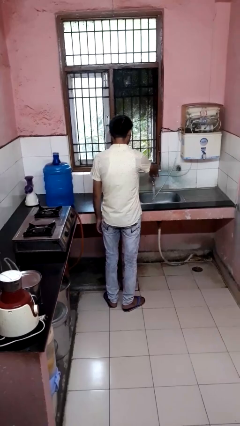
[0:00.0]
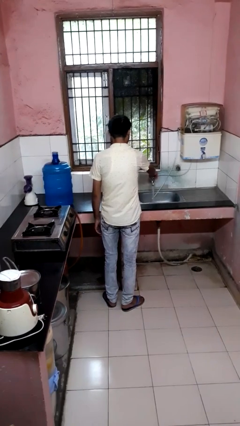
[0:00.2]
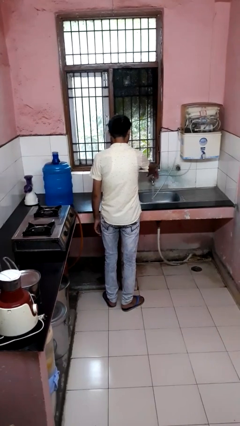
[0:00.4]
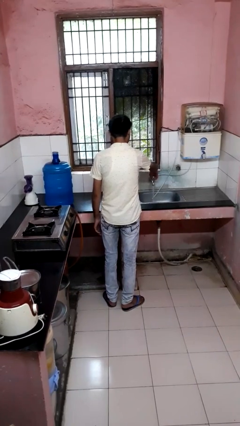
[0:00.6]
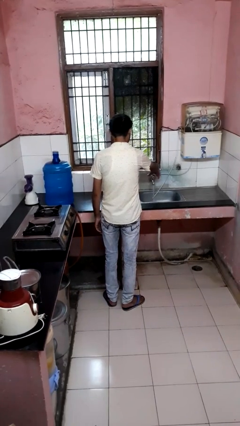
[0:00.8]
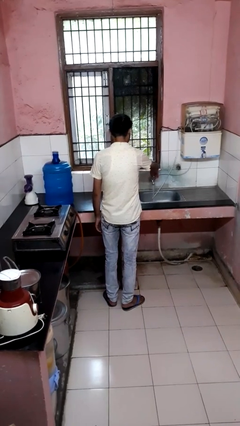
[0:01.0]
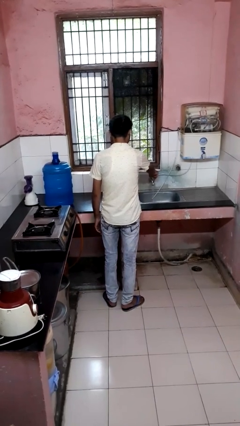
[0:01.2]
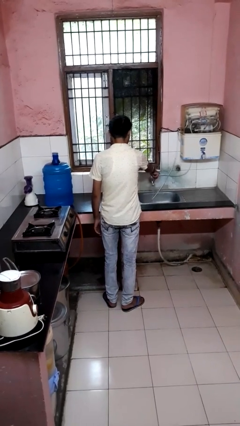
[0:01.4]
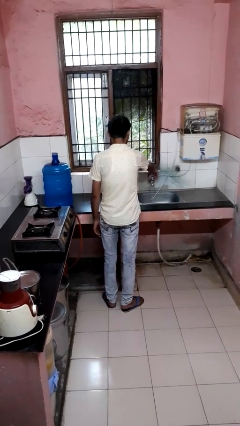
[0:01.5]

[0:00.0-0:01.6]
person turns off faucet

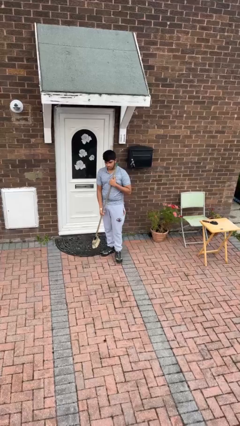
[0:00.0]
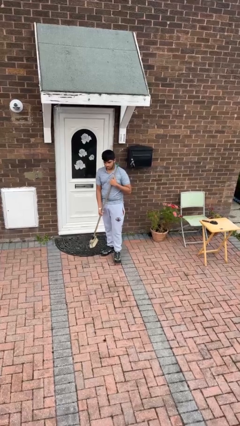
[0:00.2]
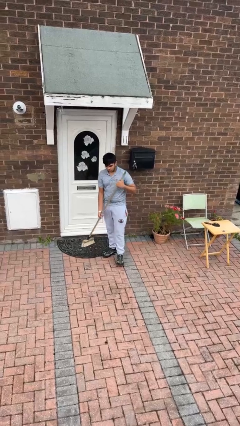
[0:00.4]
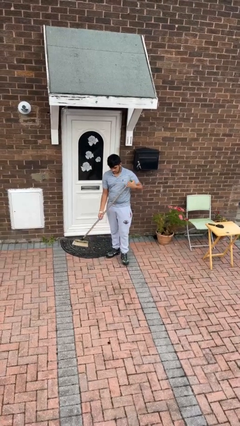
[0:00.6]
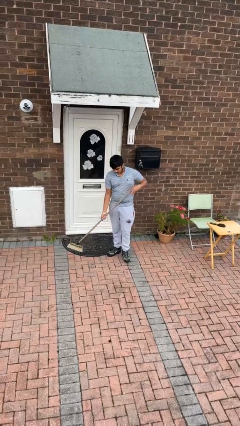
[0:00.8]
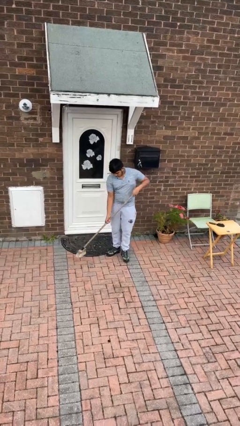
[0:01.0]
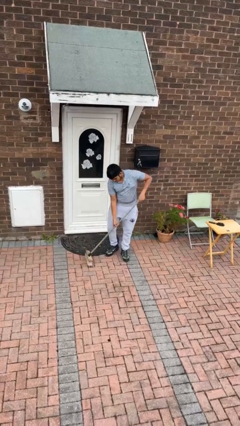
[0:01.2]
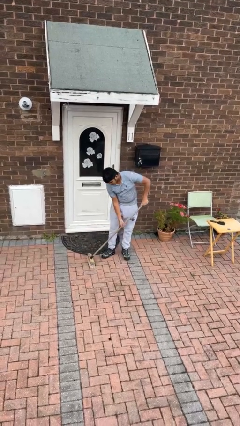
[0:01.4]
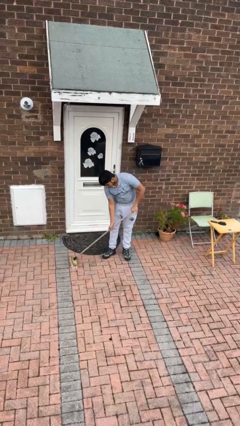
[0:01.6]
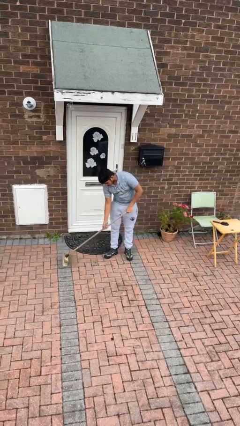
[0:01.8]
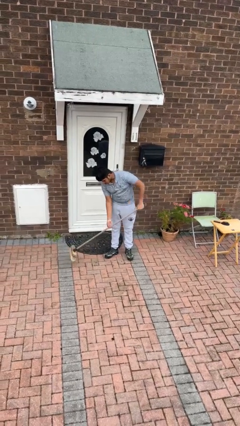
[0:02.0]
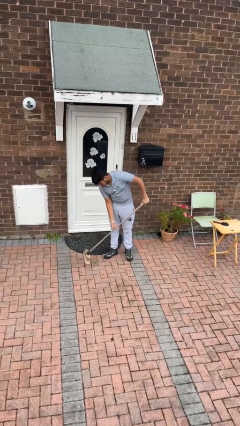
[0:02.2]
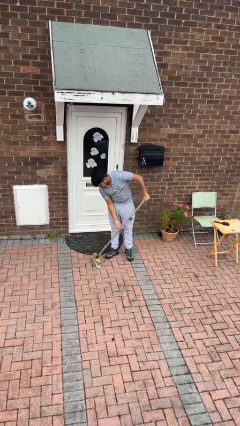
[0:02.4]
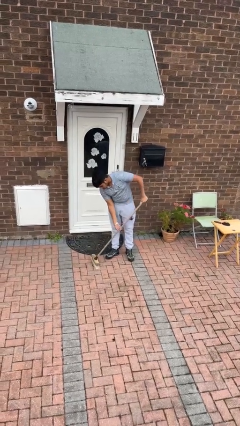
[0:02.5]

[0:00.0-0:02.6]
person sweeps floor

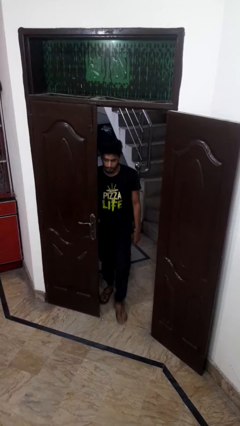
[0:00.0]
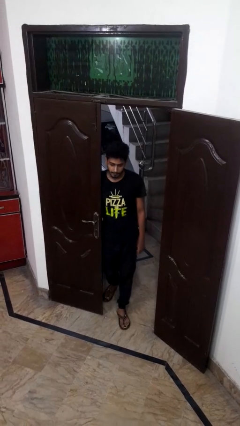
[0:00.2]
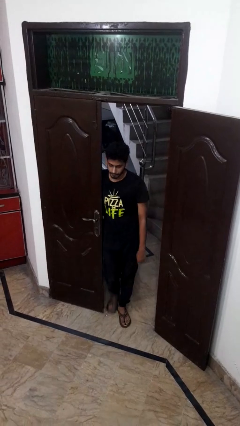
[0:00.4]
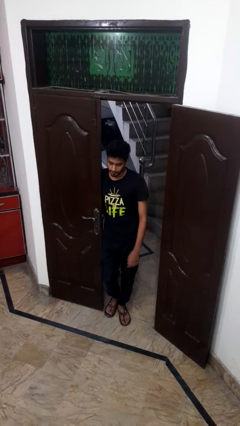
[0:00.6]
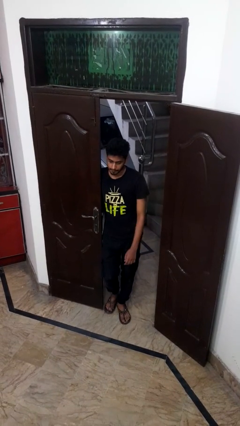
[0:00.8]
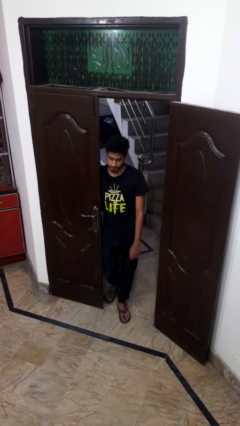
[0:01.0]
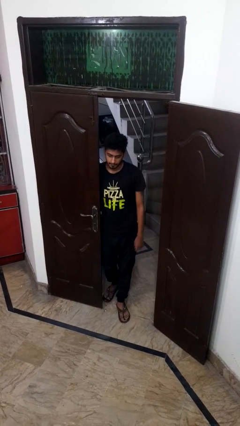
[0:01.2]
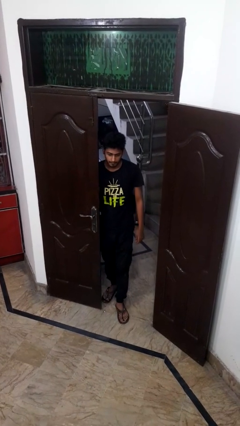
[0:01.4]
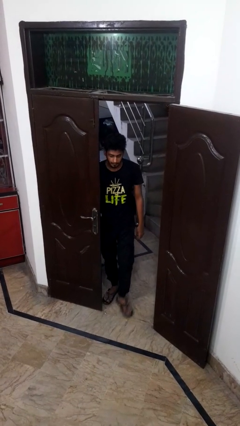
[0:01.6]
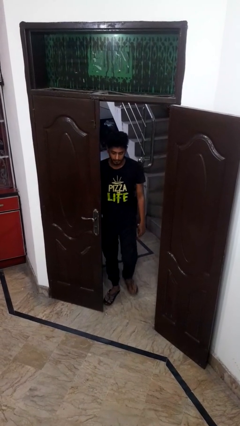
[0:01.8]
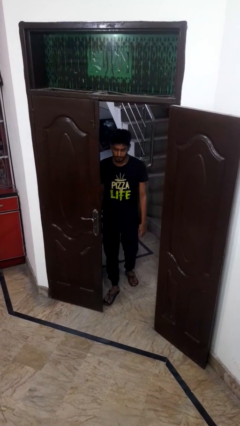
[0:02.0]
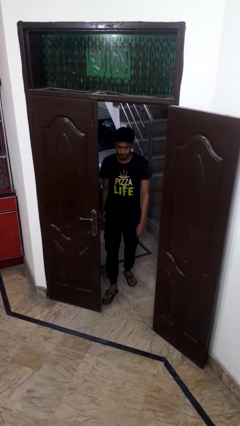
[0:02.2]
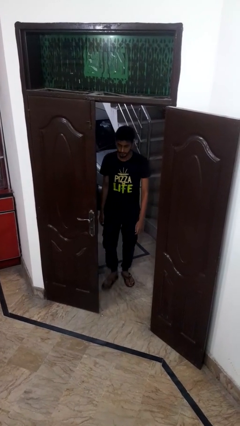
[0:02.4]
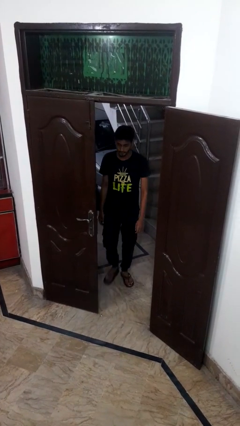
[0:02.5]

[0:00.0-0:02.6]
person bumps into wall

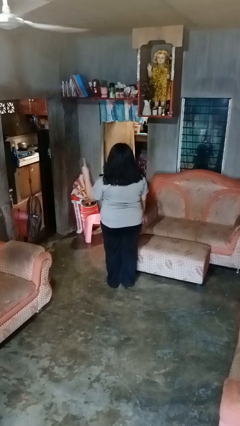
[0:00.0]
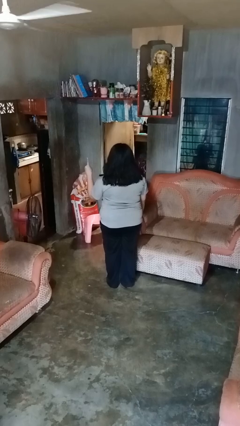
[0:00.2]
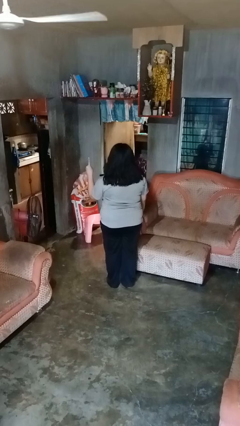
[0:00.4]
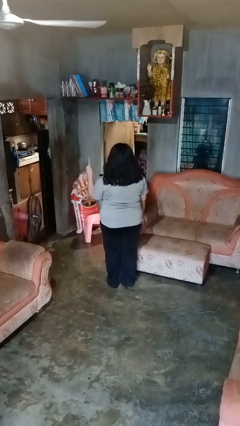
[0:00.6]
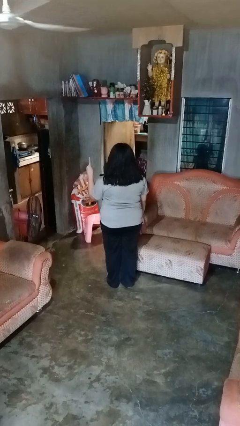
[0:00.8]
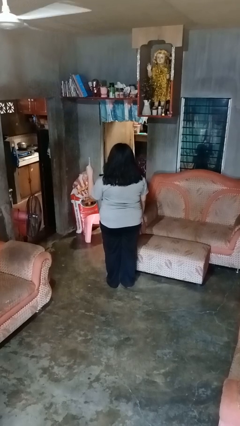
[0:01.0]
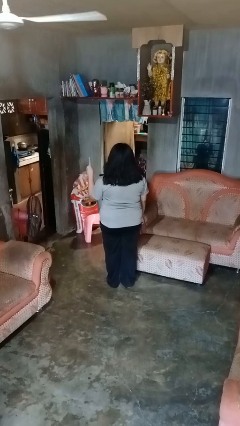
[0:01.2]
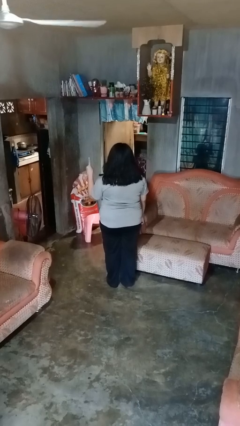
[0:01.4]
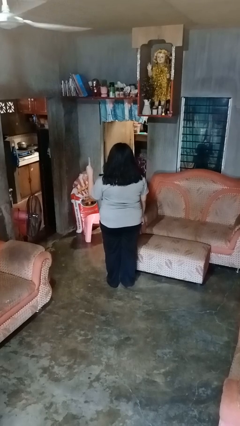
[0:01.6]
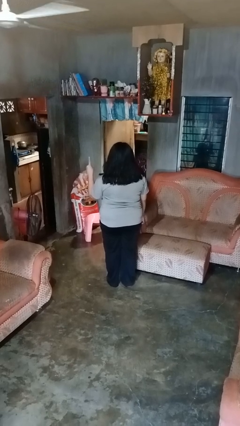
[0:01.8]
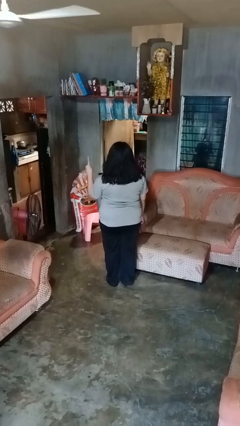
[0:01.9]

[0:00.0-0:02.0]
person gestures number one

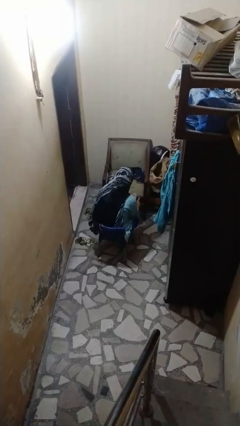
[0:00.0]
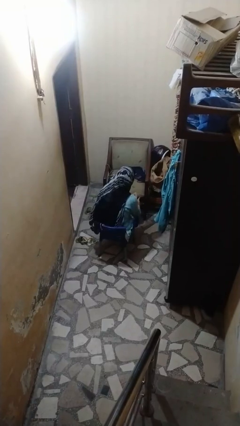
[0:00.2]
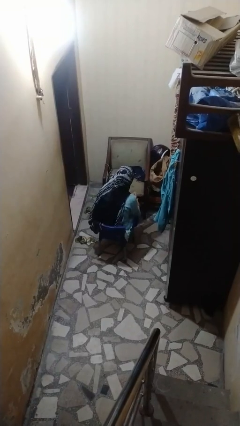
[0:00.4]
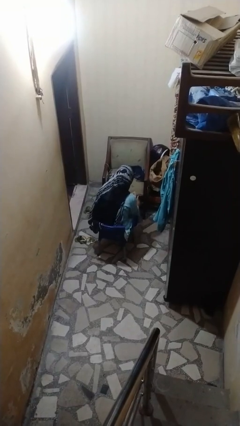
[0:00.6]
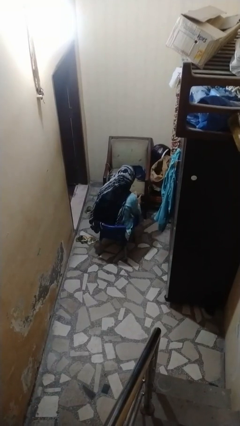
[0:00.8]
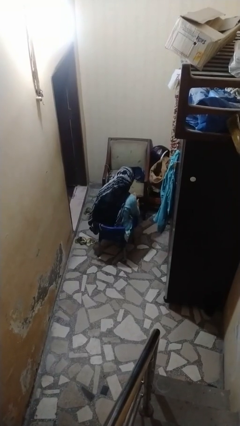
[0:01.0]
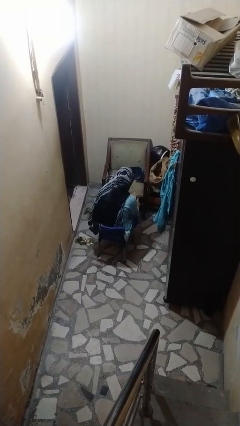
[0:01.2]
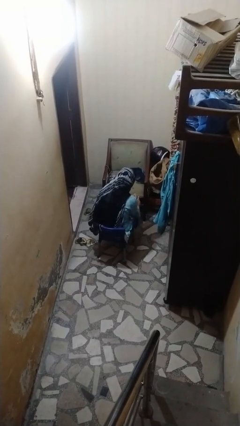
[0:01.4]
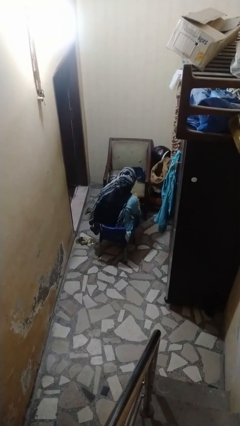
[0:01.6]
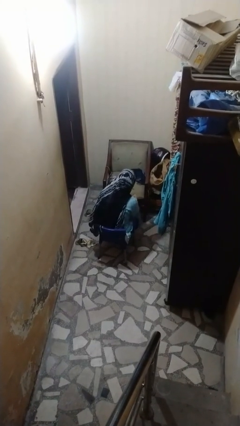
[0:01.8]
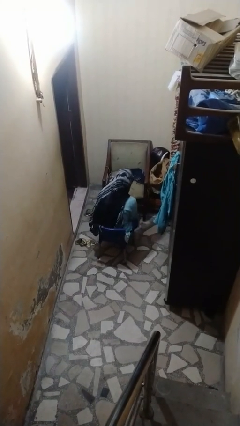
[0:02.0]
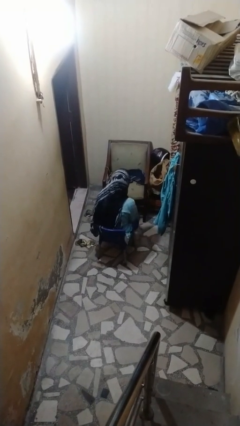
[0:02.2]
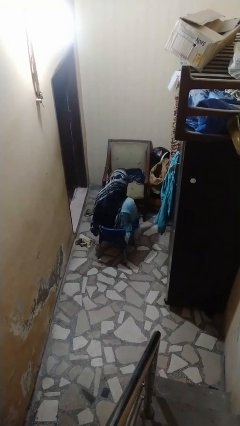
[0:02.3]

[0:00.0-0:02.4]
person rubs foot

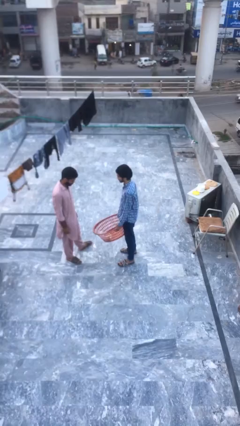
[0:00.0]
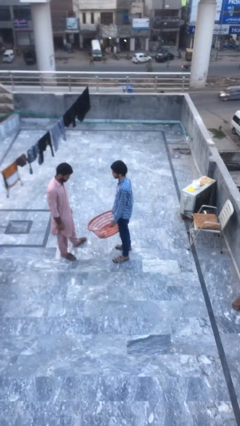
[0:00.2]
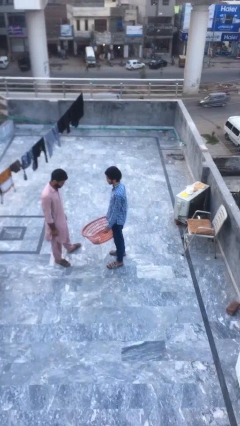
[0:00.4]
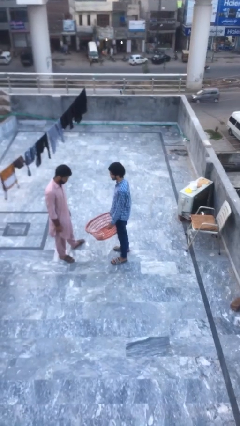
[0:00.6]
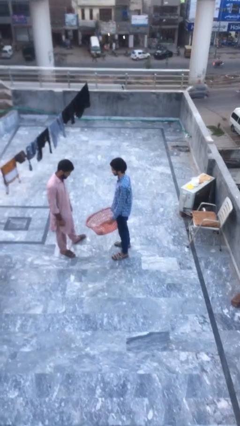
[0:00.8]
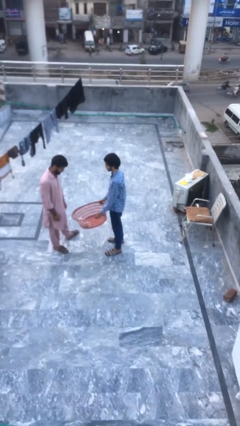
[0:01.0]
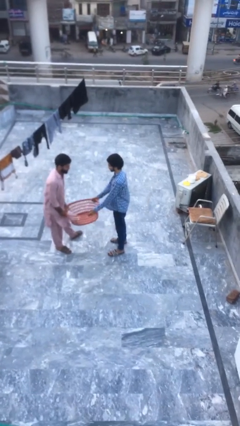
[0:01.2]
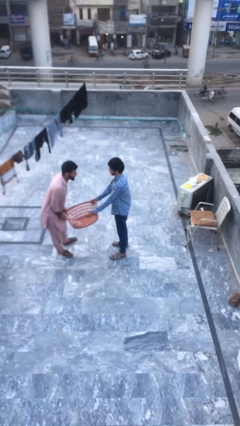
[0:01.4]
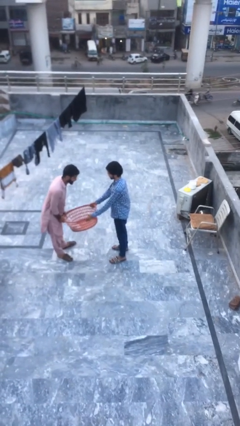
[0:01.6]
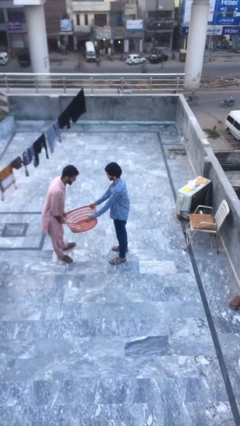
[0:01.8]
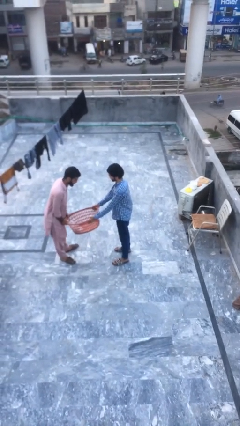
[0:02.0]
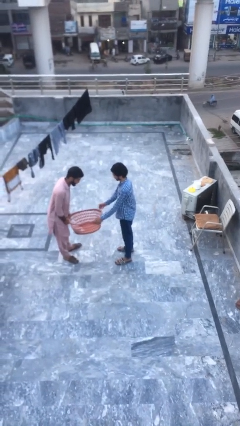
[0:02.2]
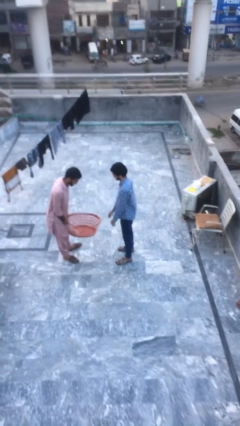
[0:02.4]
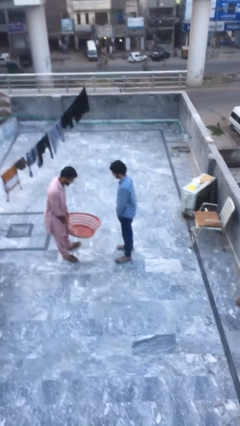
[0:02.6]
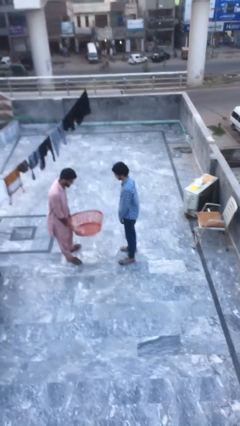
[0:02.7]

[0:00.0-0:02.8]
person transfers object to person

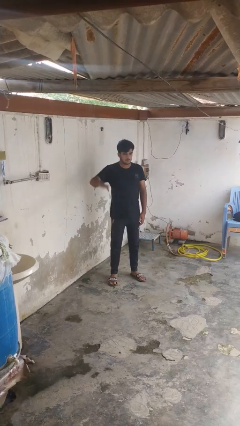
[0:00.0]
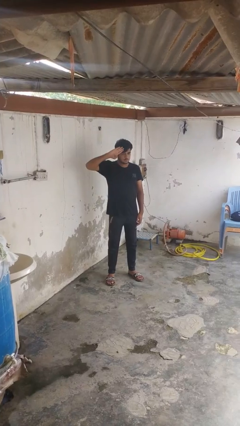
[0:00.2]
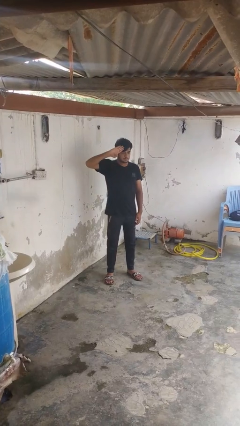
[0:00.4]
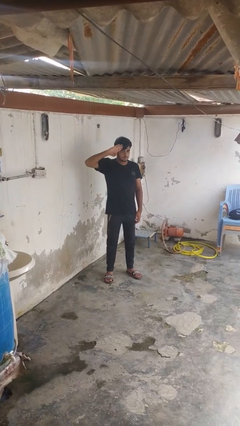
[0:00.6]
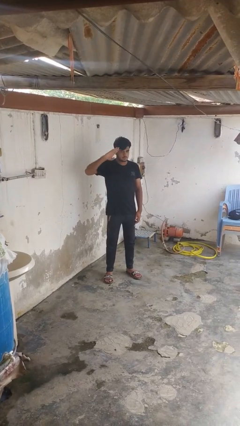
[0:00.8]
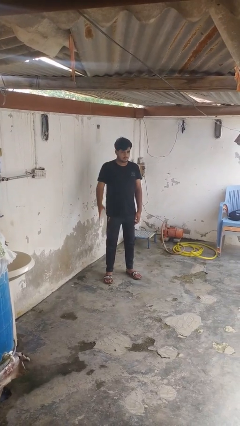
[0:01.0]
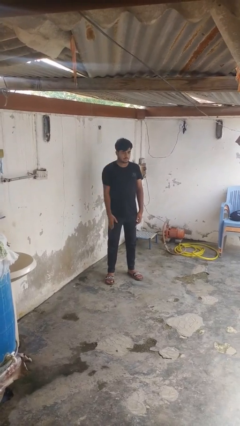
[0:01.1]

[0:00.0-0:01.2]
person salutes

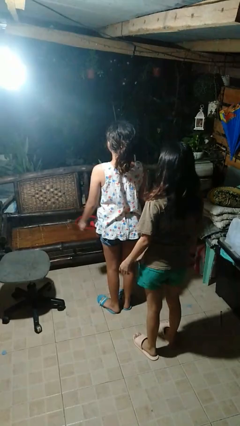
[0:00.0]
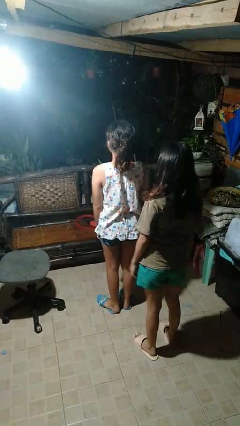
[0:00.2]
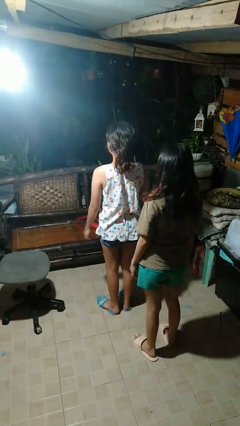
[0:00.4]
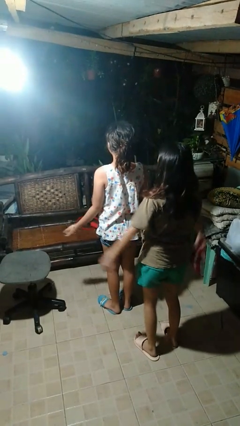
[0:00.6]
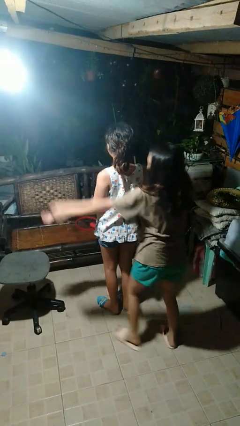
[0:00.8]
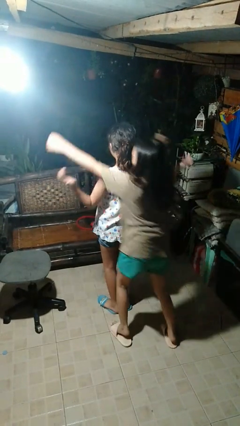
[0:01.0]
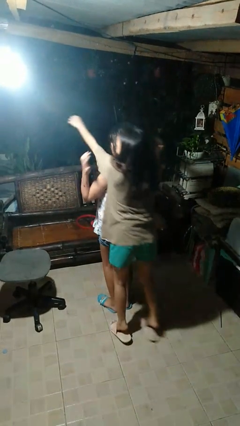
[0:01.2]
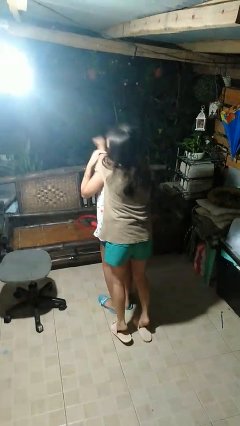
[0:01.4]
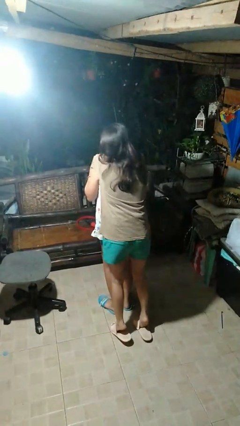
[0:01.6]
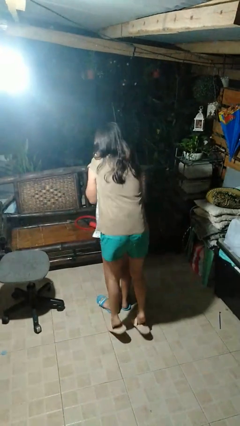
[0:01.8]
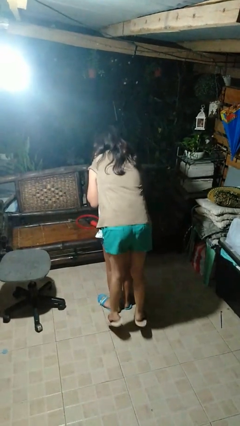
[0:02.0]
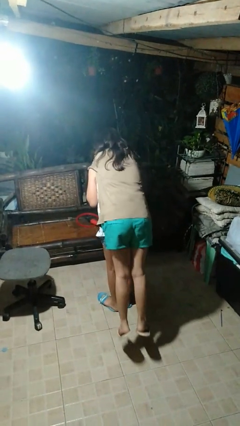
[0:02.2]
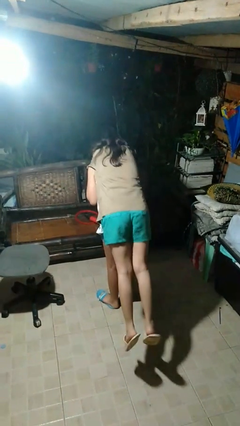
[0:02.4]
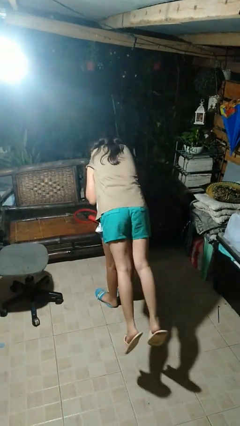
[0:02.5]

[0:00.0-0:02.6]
person carries person on back
